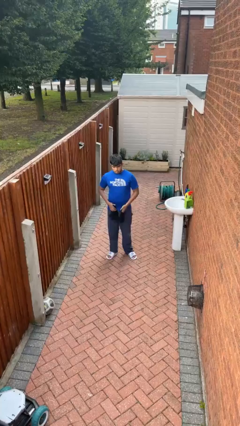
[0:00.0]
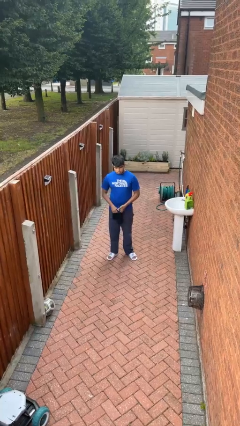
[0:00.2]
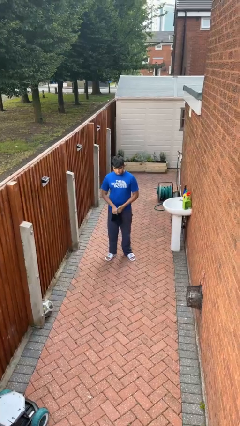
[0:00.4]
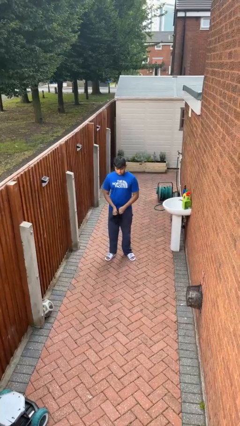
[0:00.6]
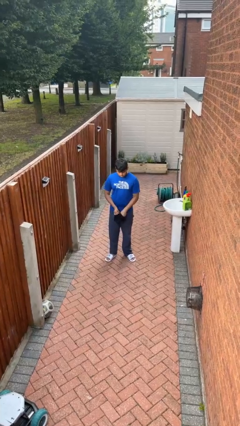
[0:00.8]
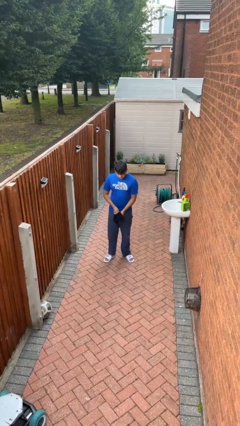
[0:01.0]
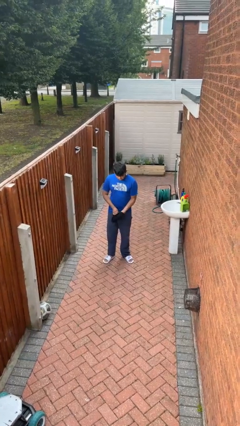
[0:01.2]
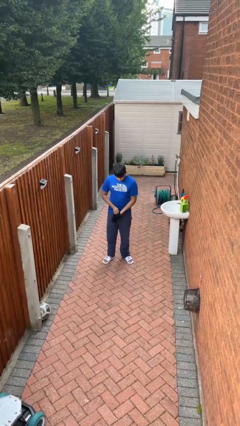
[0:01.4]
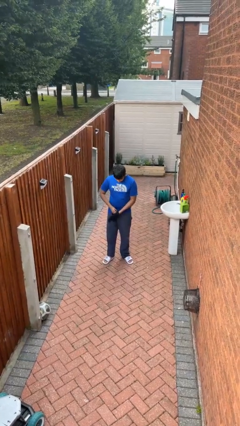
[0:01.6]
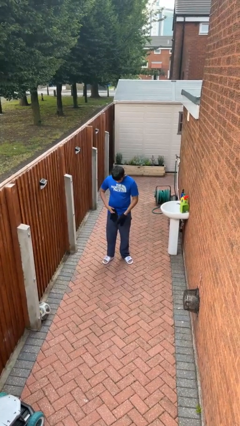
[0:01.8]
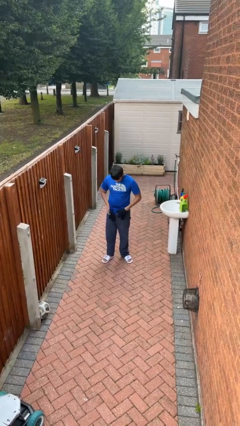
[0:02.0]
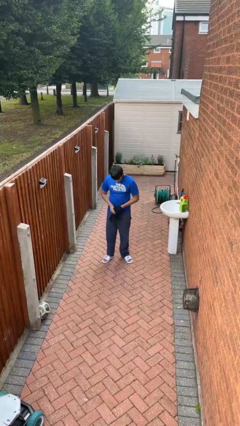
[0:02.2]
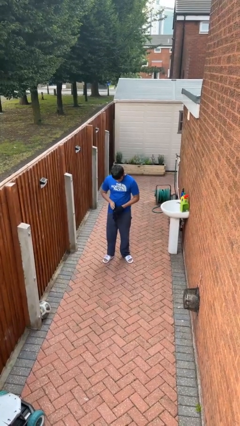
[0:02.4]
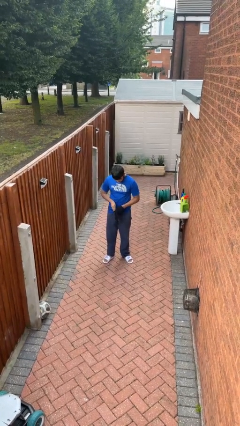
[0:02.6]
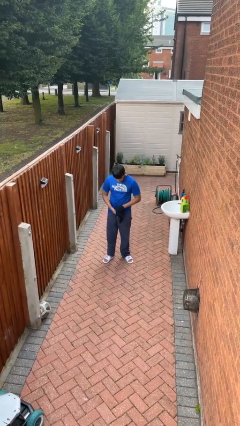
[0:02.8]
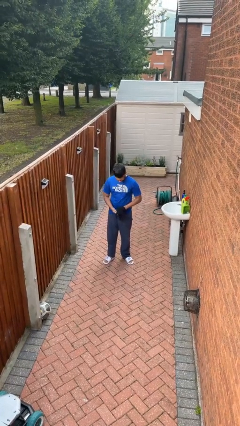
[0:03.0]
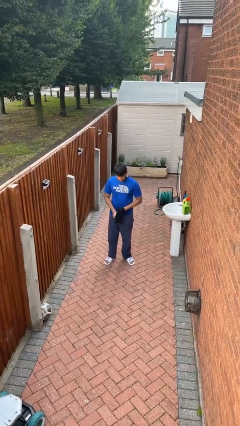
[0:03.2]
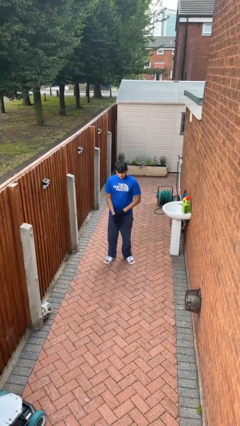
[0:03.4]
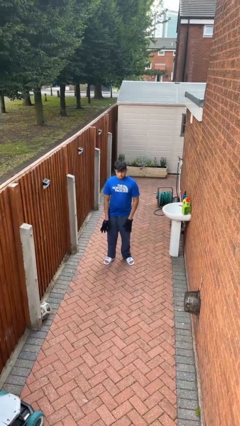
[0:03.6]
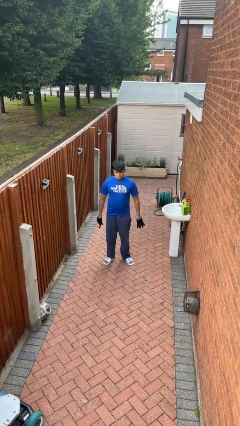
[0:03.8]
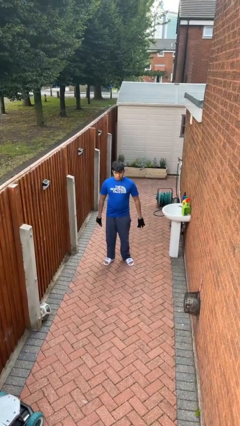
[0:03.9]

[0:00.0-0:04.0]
person puts on gloves

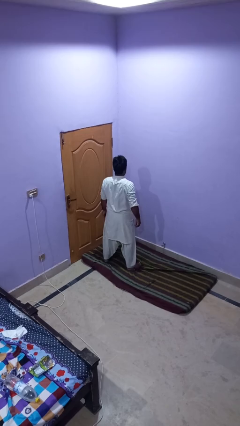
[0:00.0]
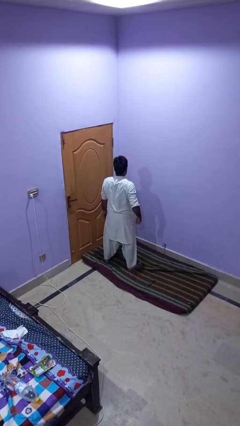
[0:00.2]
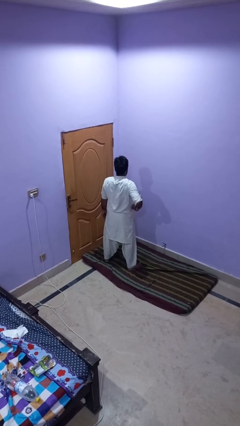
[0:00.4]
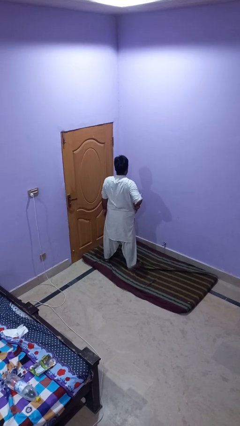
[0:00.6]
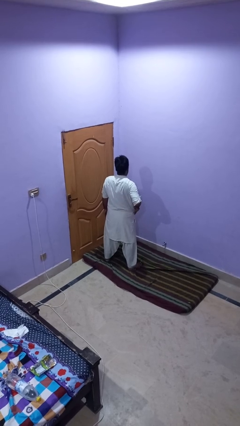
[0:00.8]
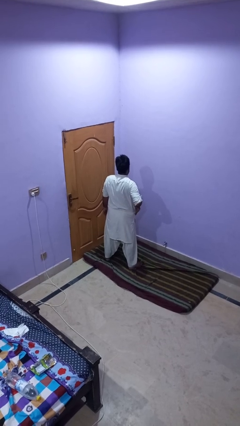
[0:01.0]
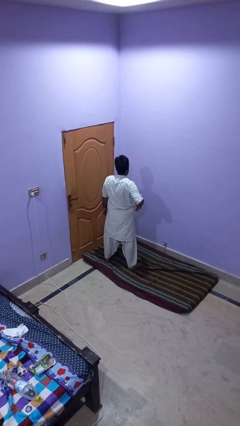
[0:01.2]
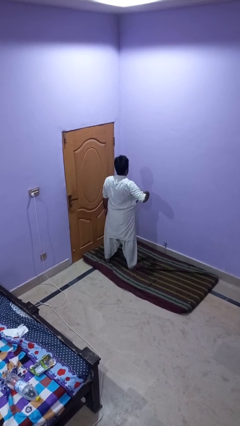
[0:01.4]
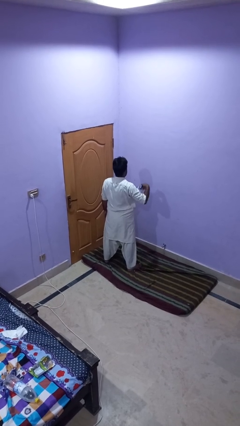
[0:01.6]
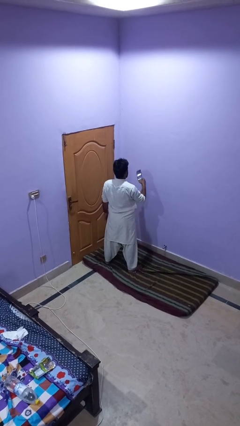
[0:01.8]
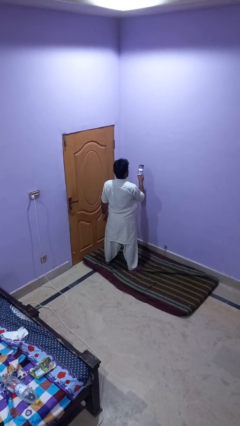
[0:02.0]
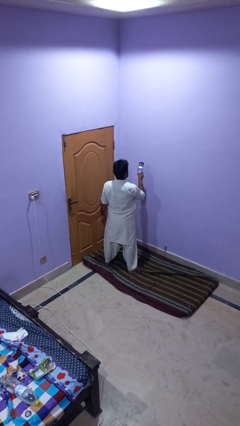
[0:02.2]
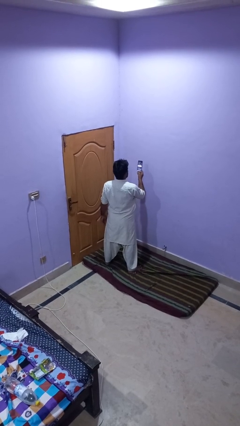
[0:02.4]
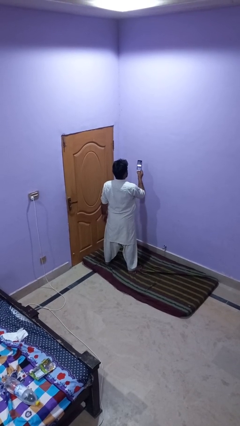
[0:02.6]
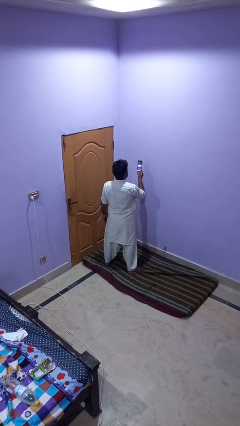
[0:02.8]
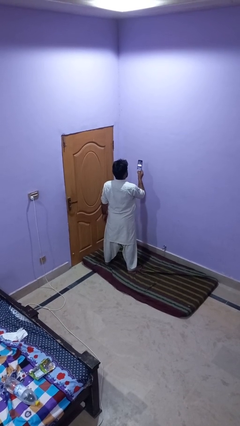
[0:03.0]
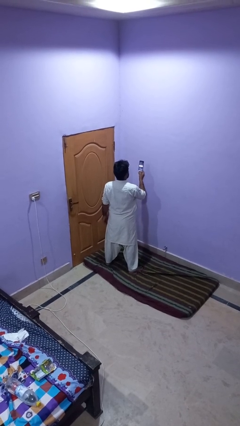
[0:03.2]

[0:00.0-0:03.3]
person takes phone from pocket

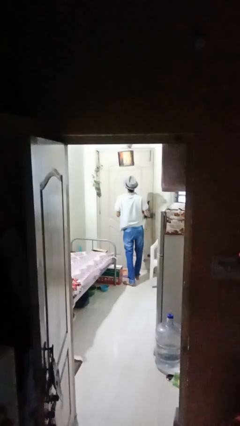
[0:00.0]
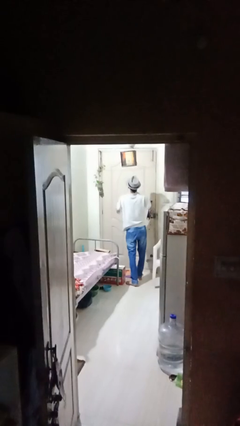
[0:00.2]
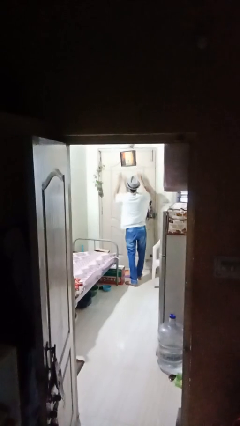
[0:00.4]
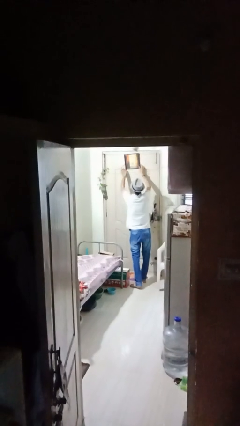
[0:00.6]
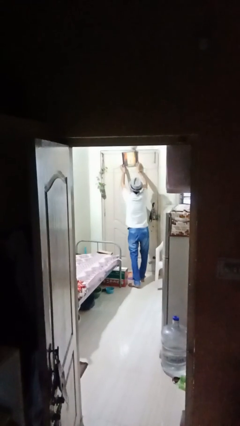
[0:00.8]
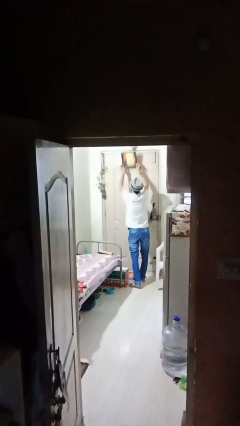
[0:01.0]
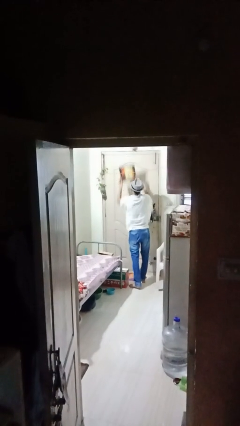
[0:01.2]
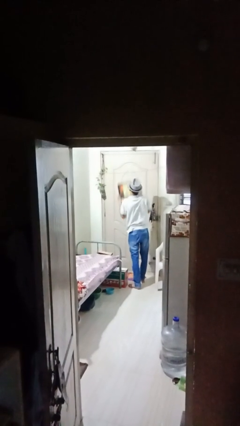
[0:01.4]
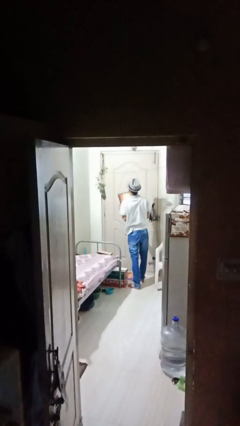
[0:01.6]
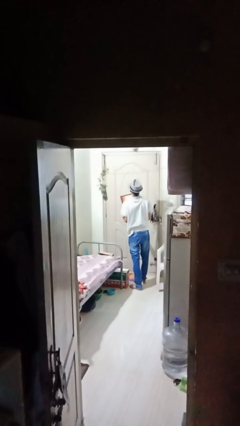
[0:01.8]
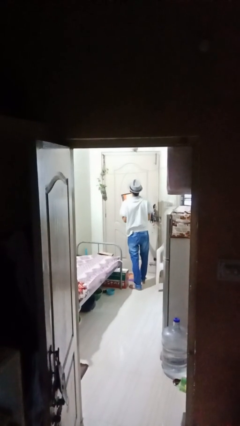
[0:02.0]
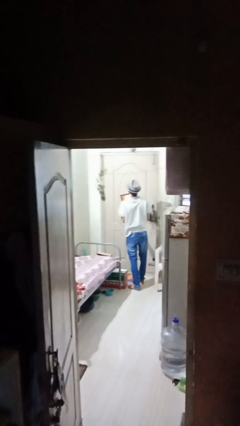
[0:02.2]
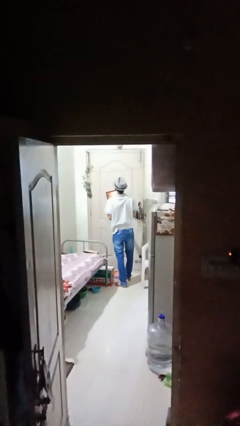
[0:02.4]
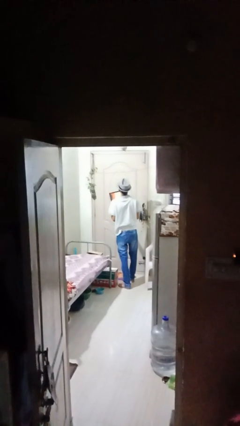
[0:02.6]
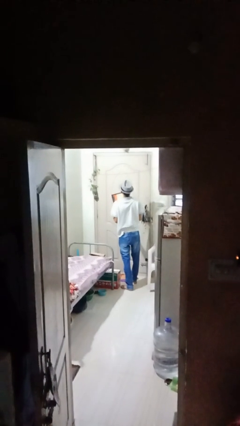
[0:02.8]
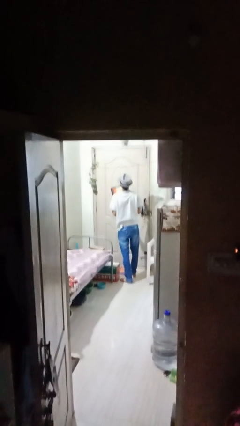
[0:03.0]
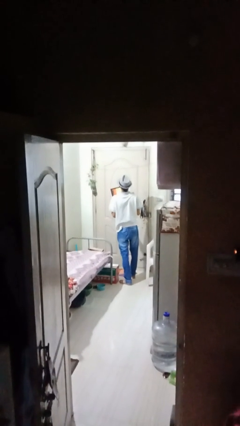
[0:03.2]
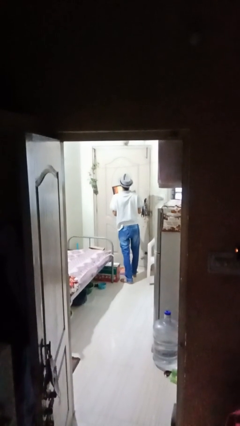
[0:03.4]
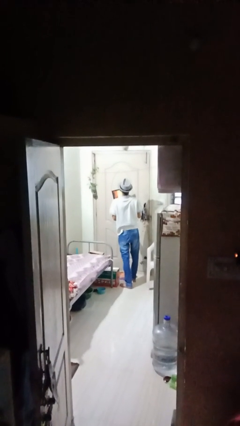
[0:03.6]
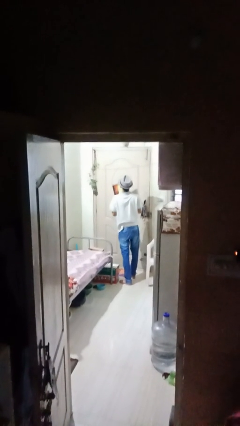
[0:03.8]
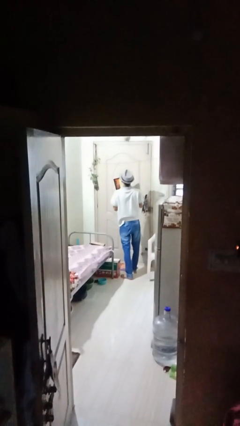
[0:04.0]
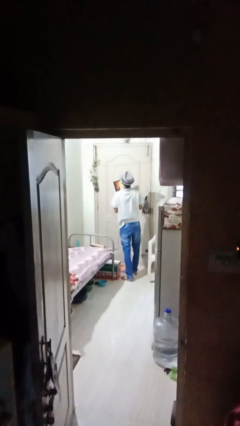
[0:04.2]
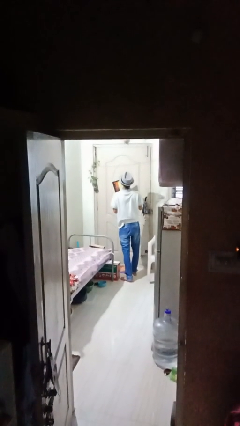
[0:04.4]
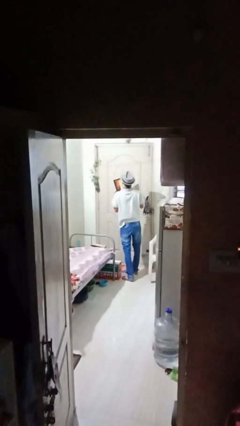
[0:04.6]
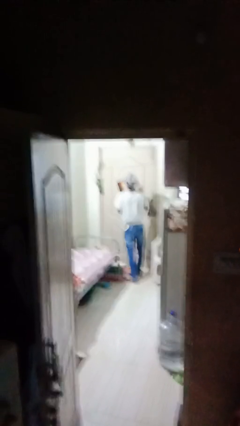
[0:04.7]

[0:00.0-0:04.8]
person takes down picture frame

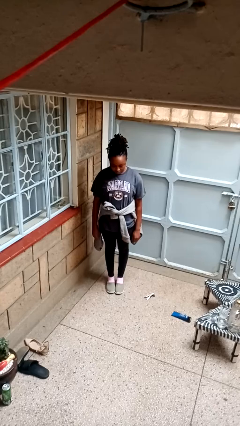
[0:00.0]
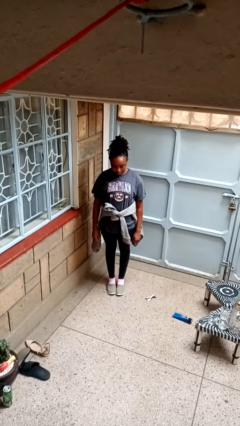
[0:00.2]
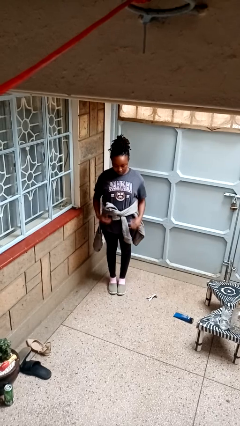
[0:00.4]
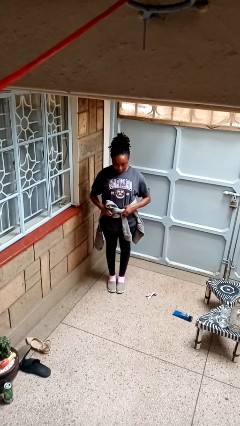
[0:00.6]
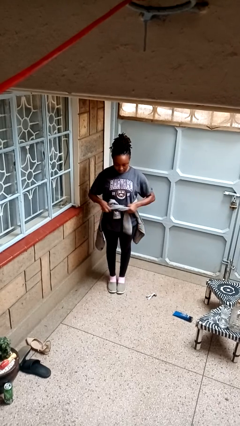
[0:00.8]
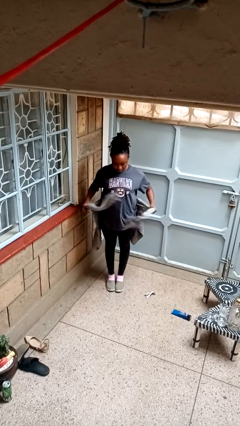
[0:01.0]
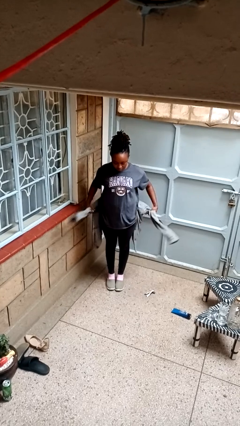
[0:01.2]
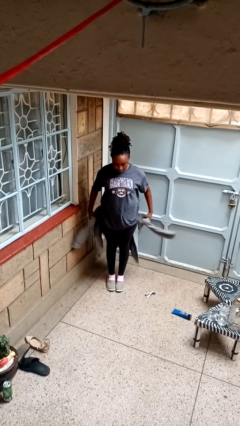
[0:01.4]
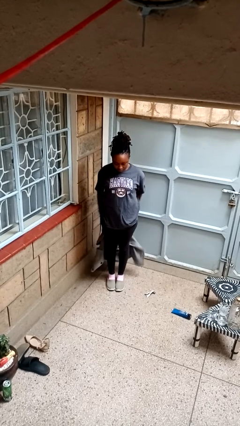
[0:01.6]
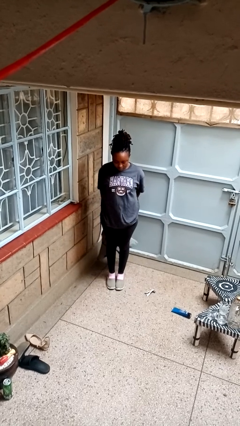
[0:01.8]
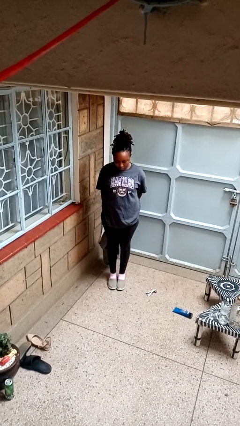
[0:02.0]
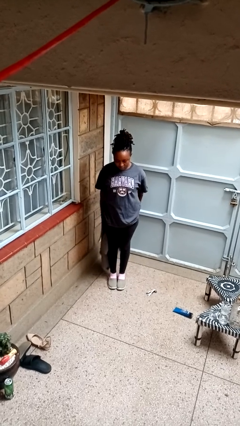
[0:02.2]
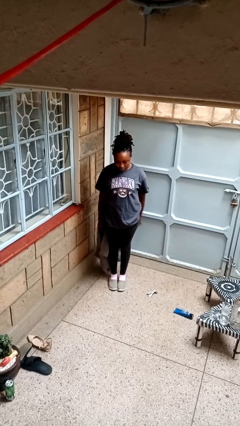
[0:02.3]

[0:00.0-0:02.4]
person unties jacket around waist

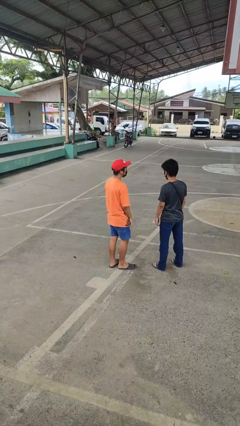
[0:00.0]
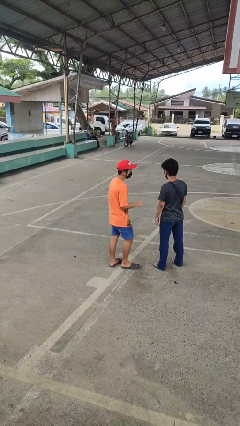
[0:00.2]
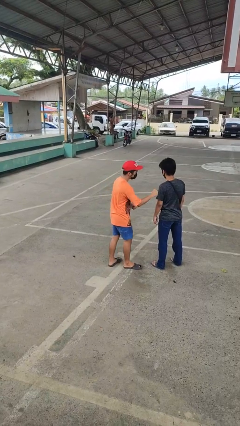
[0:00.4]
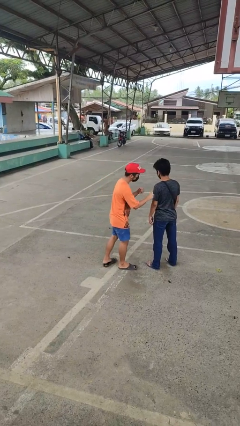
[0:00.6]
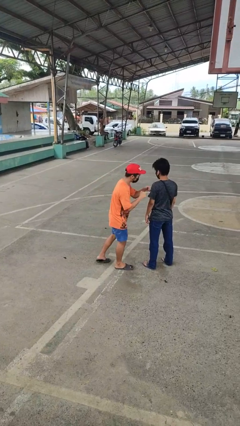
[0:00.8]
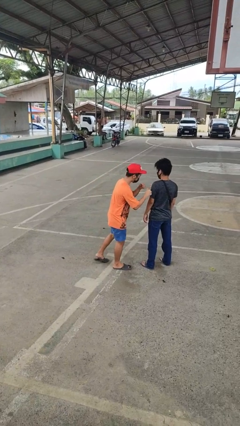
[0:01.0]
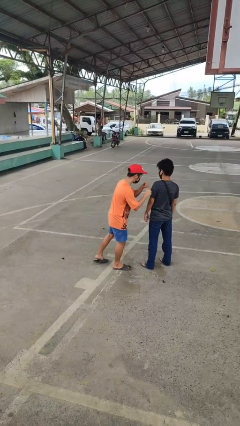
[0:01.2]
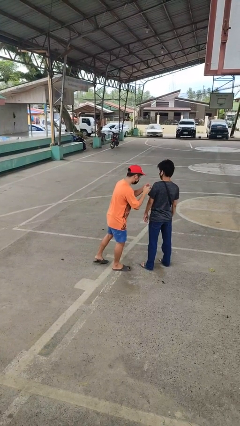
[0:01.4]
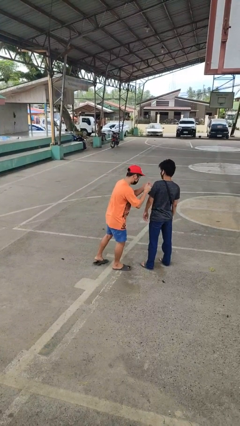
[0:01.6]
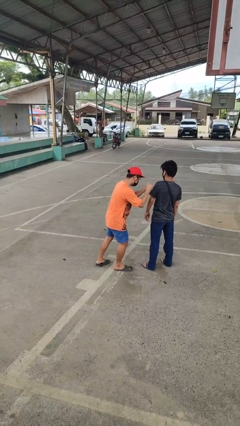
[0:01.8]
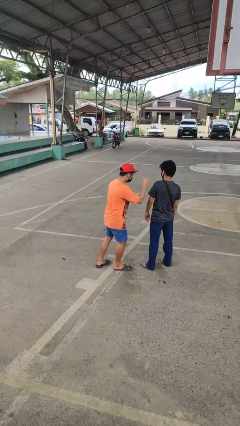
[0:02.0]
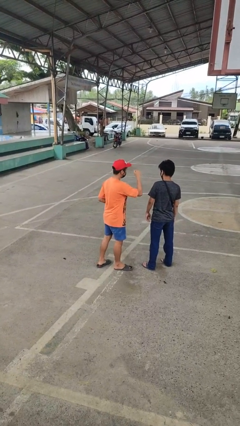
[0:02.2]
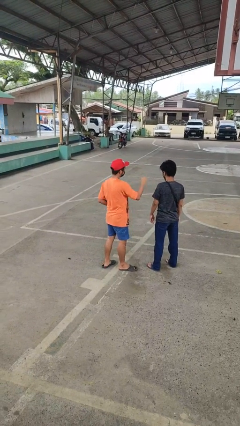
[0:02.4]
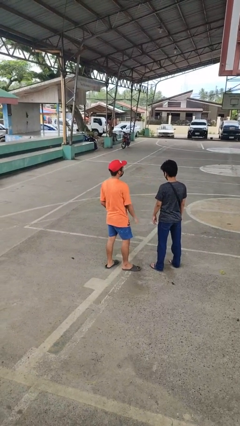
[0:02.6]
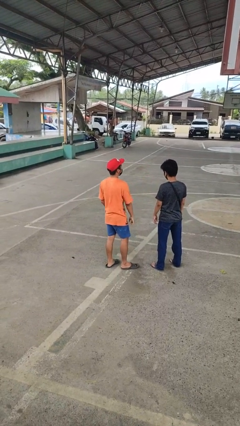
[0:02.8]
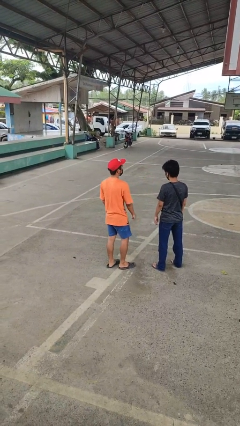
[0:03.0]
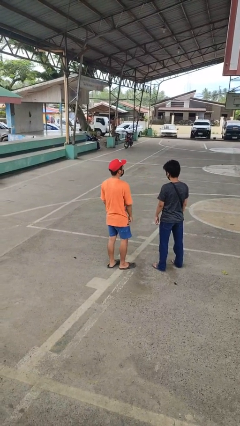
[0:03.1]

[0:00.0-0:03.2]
person pounds shoulders of person
